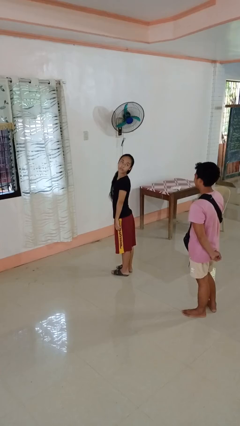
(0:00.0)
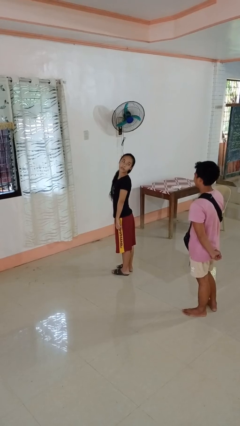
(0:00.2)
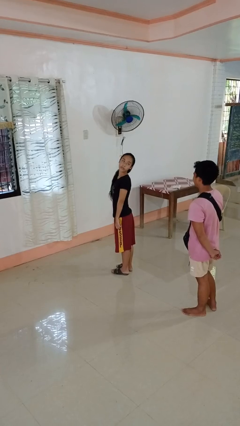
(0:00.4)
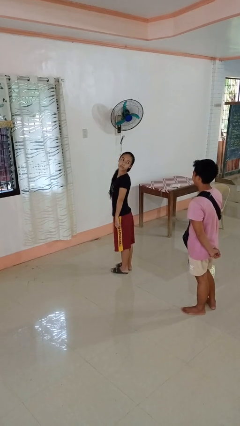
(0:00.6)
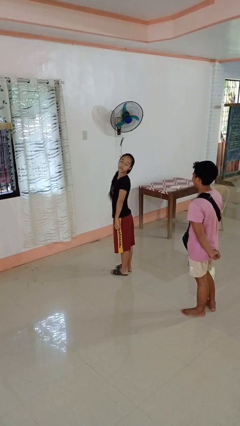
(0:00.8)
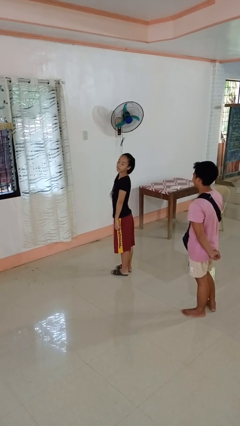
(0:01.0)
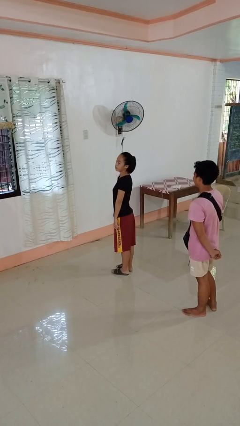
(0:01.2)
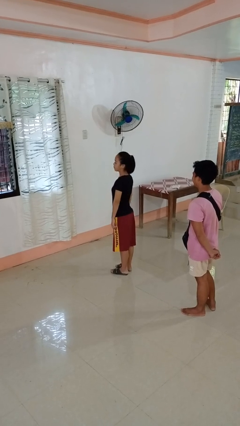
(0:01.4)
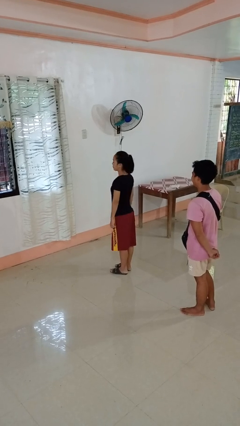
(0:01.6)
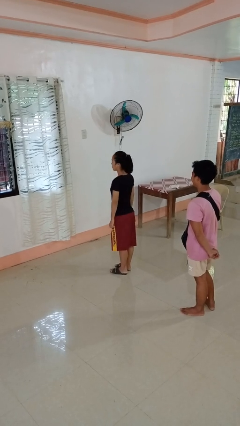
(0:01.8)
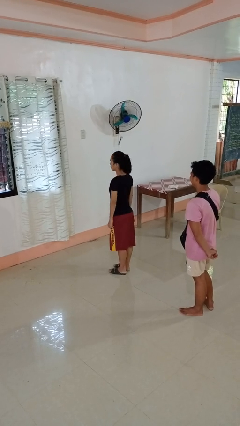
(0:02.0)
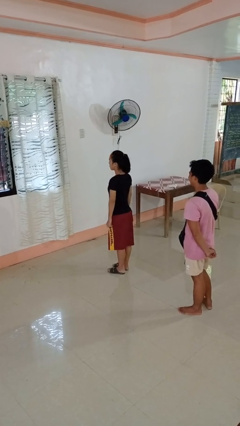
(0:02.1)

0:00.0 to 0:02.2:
person looks over shoulder

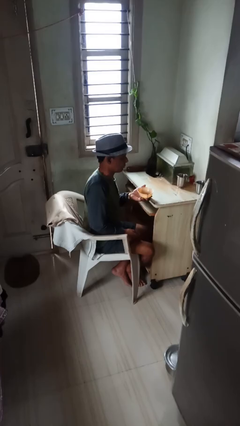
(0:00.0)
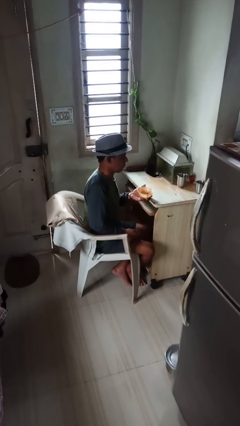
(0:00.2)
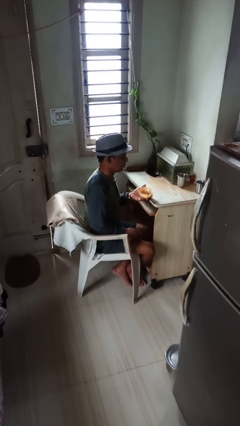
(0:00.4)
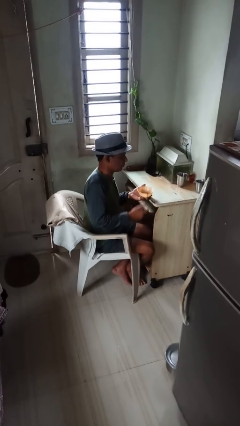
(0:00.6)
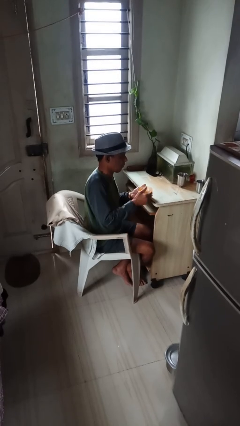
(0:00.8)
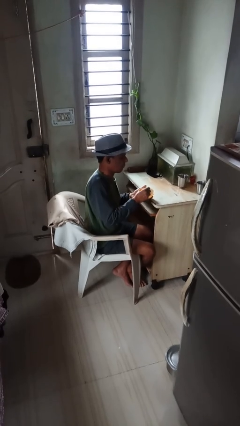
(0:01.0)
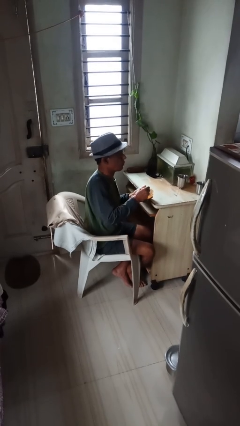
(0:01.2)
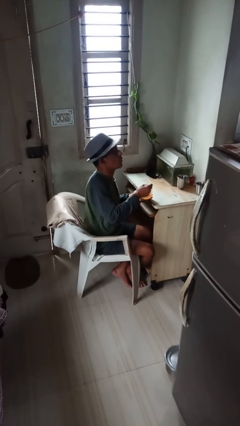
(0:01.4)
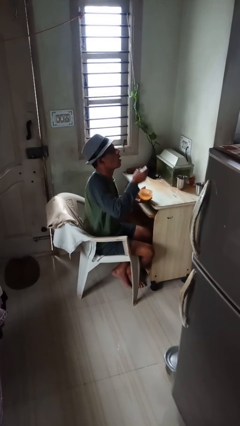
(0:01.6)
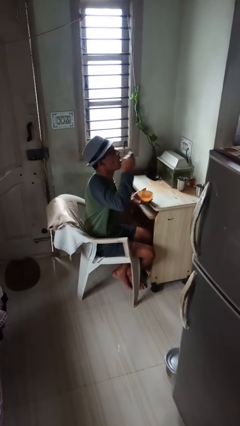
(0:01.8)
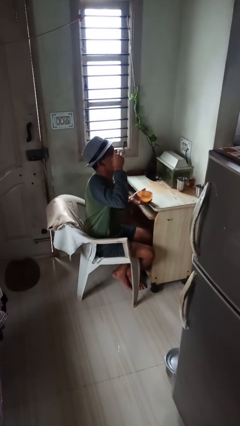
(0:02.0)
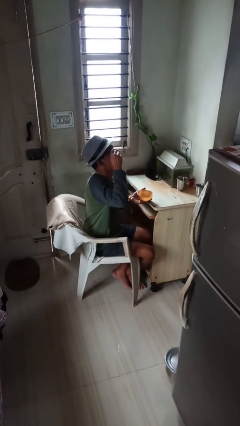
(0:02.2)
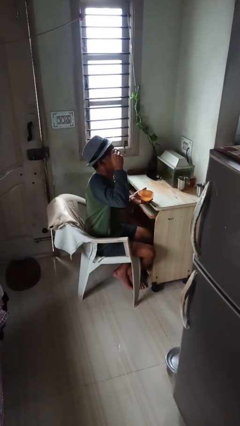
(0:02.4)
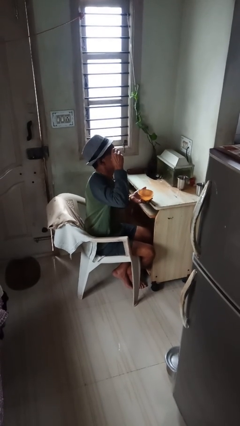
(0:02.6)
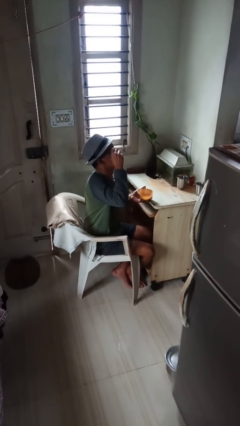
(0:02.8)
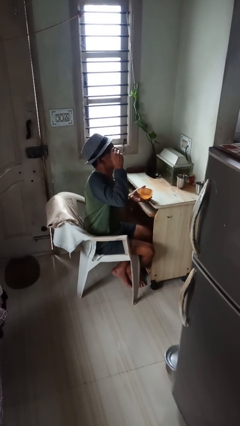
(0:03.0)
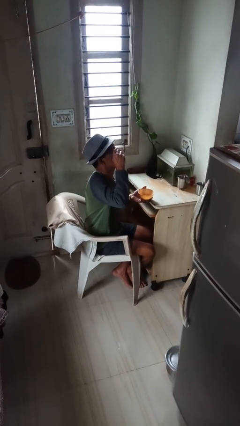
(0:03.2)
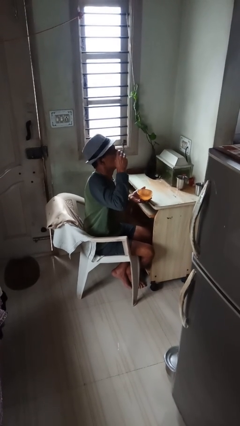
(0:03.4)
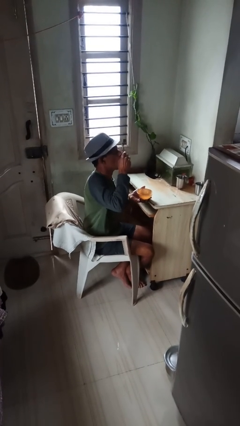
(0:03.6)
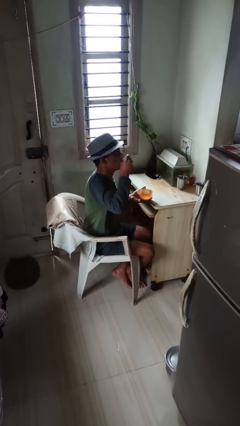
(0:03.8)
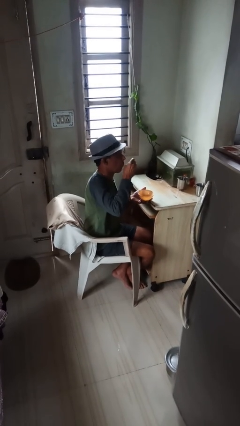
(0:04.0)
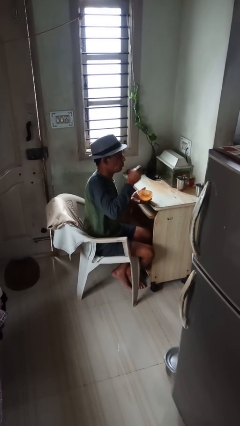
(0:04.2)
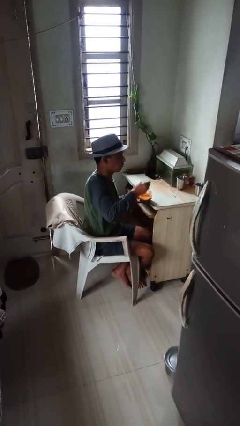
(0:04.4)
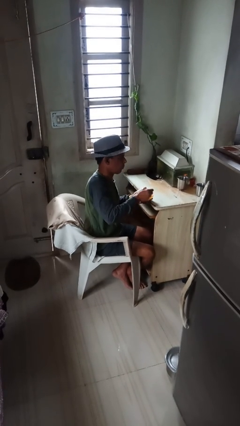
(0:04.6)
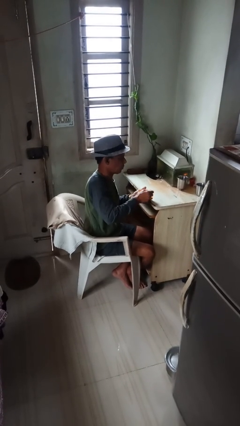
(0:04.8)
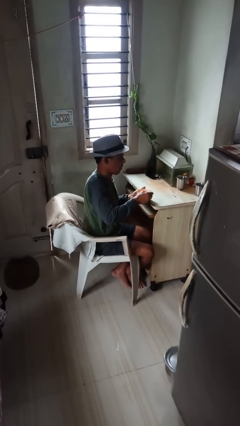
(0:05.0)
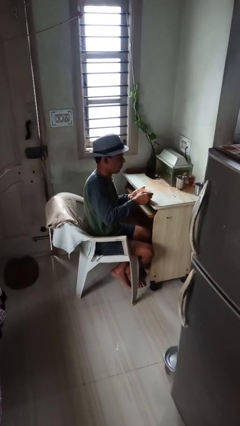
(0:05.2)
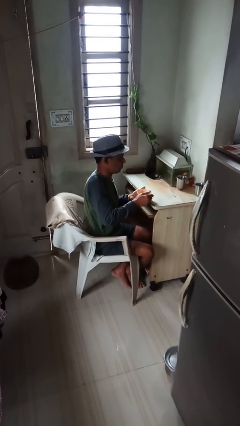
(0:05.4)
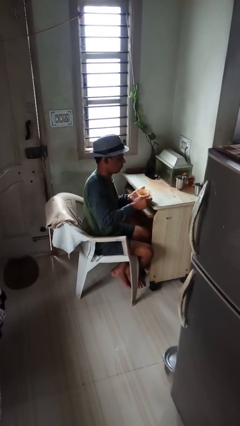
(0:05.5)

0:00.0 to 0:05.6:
person eats with utensil

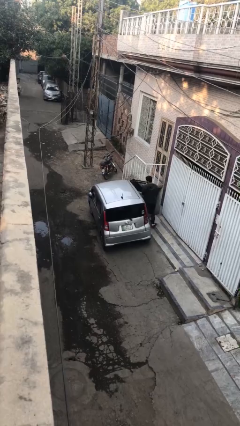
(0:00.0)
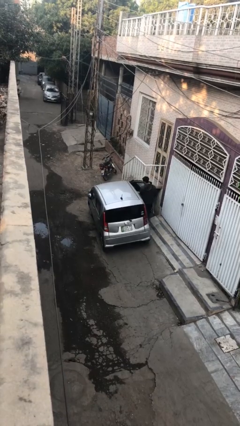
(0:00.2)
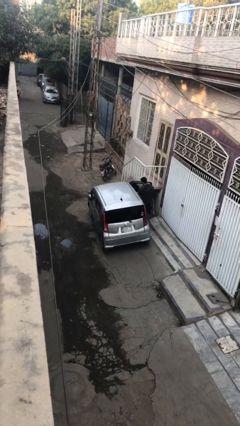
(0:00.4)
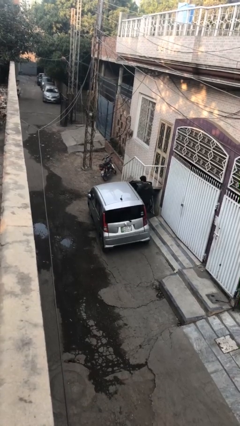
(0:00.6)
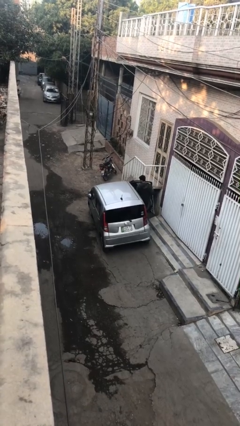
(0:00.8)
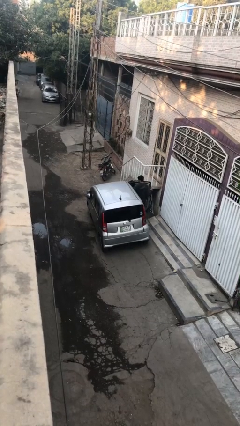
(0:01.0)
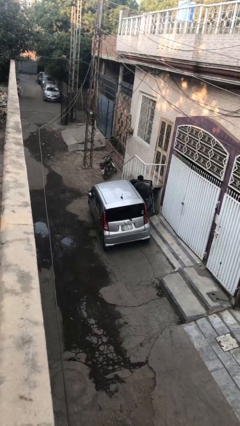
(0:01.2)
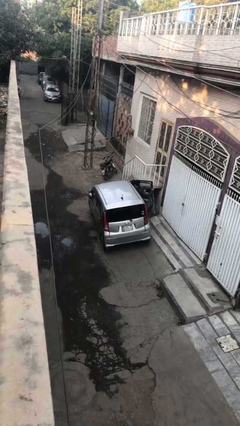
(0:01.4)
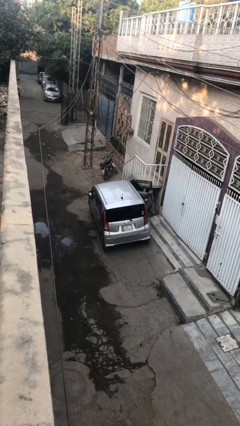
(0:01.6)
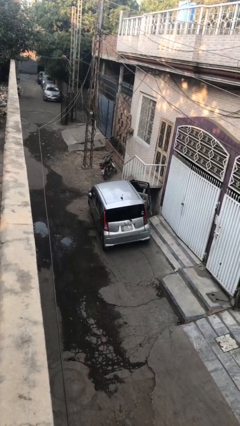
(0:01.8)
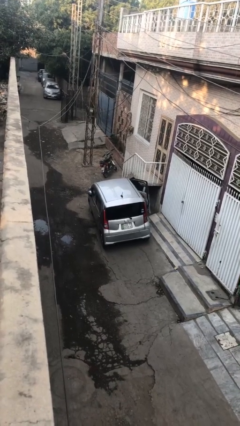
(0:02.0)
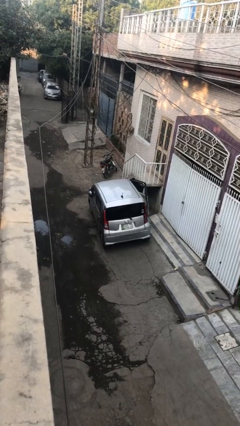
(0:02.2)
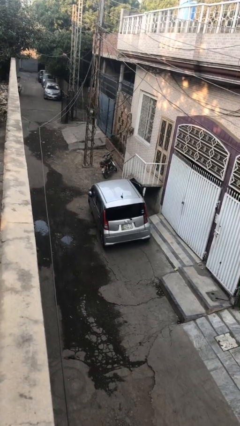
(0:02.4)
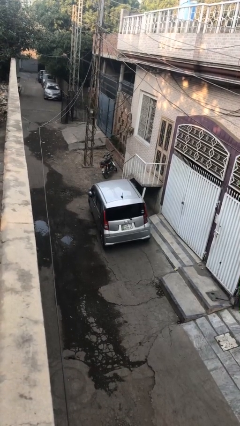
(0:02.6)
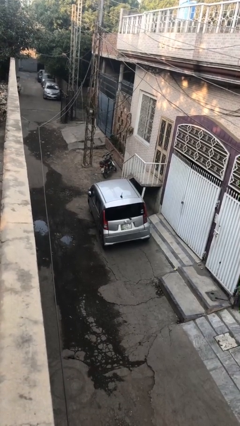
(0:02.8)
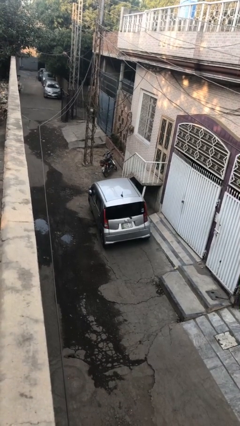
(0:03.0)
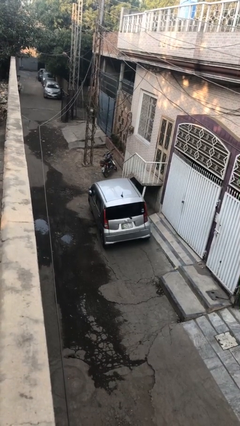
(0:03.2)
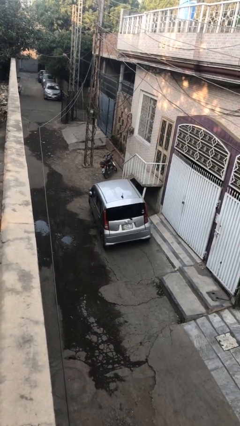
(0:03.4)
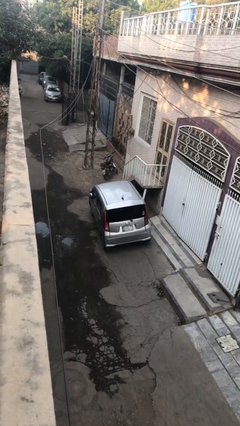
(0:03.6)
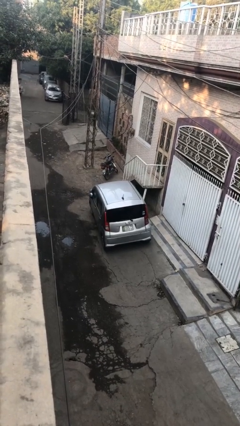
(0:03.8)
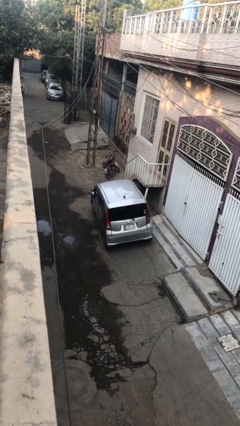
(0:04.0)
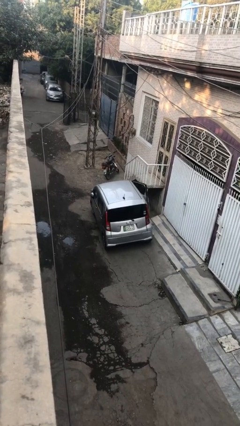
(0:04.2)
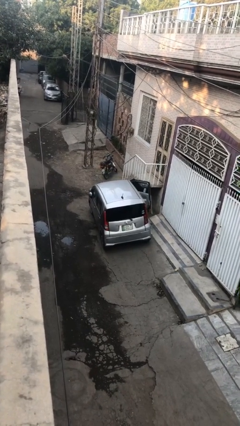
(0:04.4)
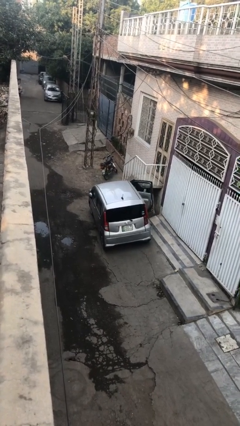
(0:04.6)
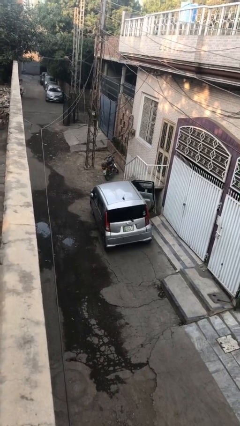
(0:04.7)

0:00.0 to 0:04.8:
car picks up person

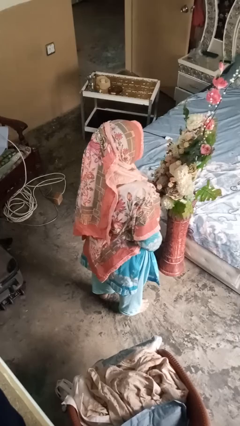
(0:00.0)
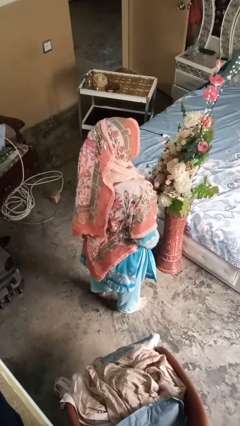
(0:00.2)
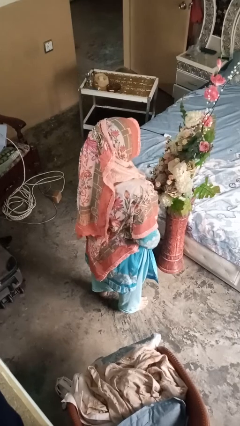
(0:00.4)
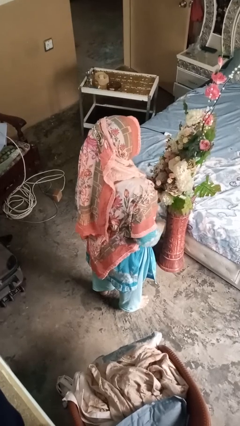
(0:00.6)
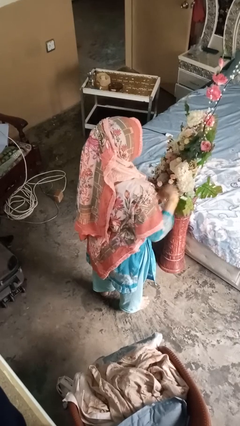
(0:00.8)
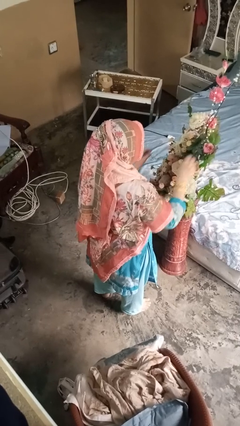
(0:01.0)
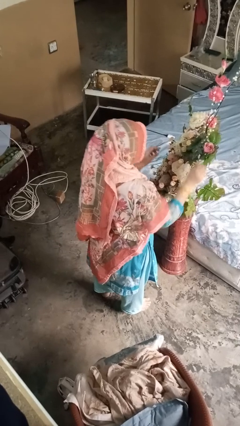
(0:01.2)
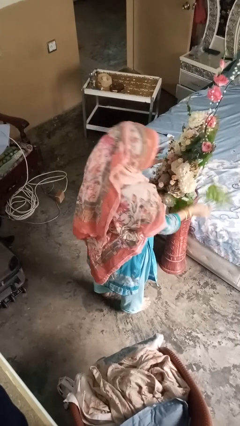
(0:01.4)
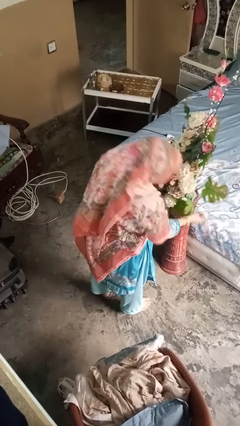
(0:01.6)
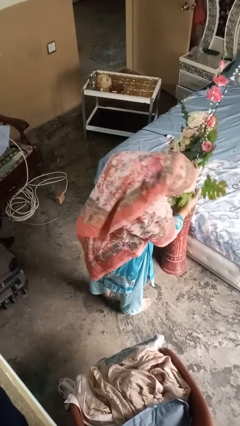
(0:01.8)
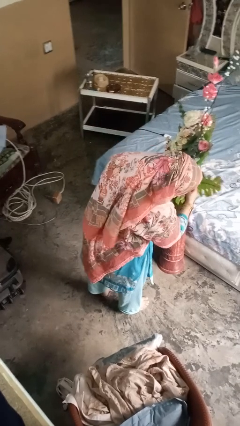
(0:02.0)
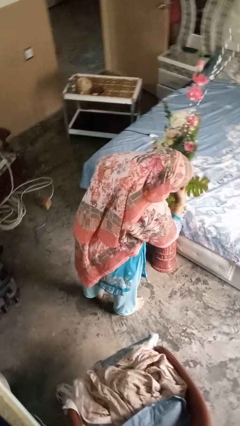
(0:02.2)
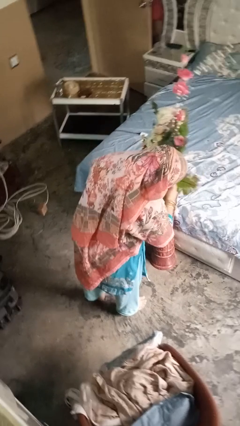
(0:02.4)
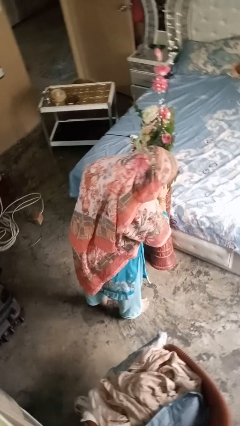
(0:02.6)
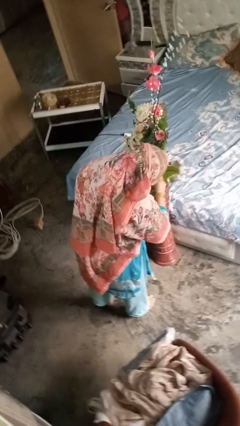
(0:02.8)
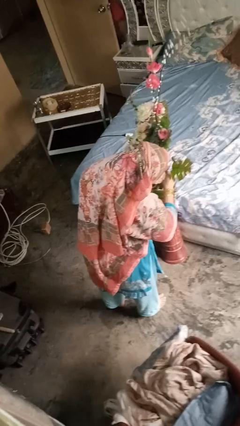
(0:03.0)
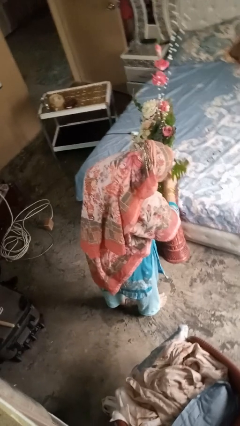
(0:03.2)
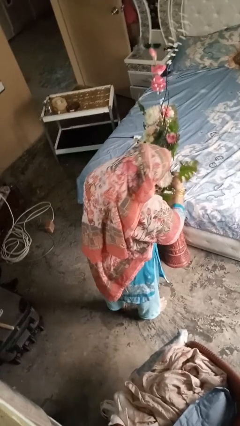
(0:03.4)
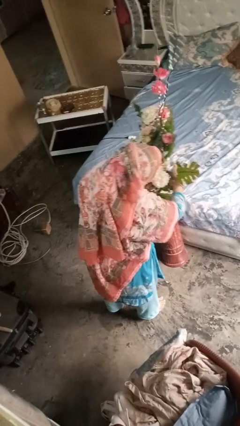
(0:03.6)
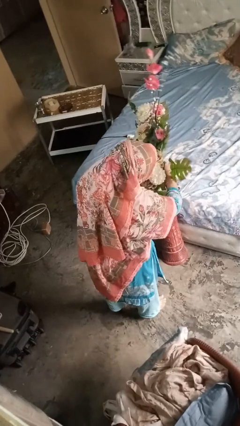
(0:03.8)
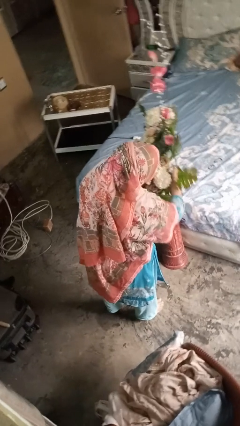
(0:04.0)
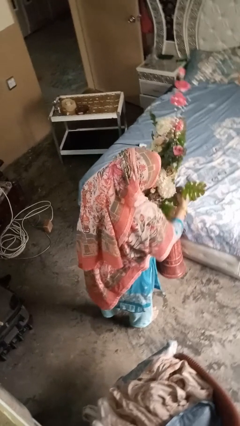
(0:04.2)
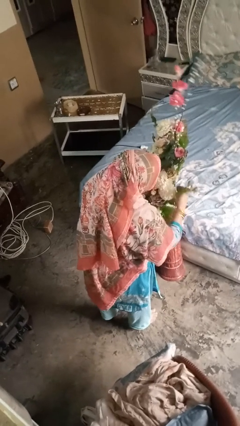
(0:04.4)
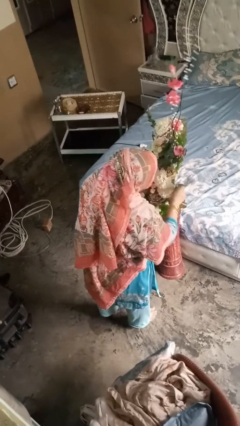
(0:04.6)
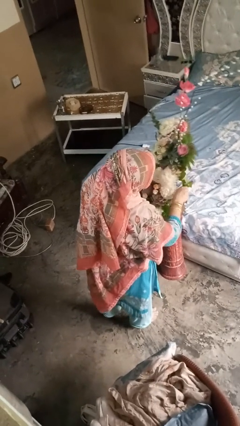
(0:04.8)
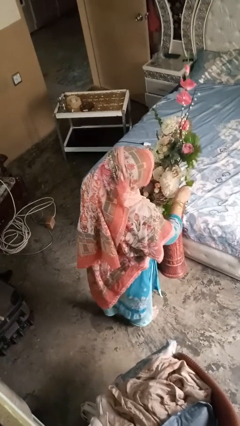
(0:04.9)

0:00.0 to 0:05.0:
person arranges flowers in vase

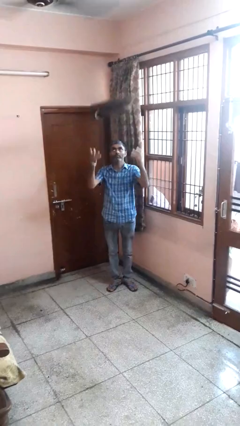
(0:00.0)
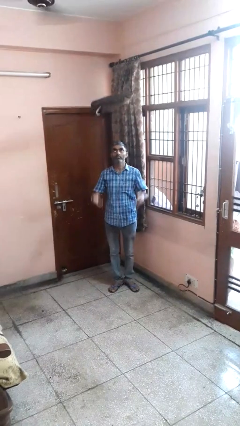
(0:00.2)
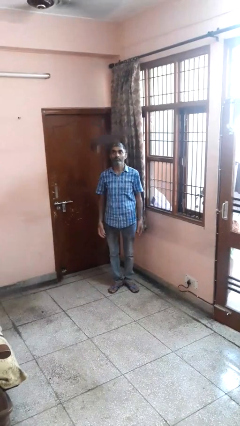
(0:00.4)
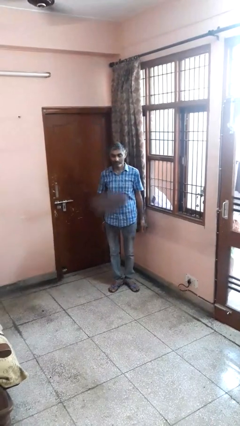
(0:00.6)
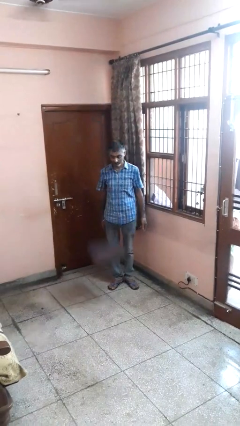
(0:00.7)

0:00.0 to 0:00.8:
person throws object into air
